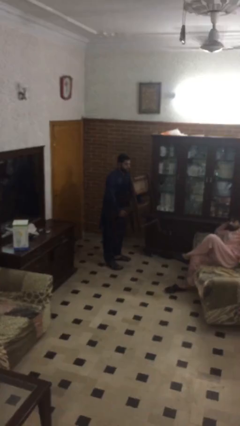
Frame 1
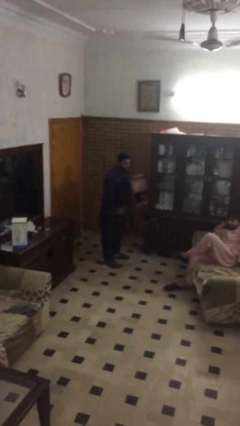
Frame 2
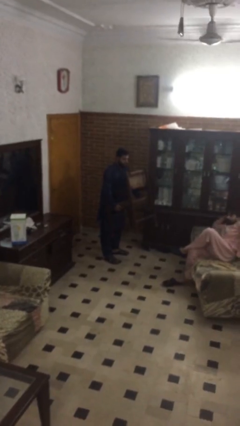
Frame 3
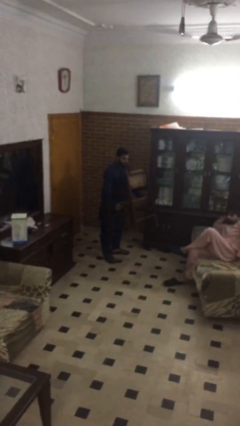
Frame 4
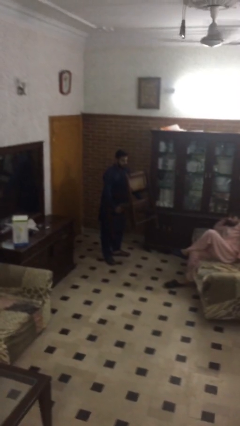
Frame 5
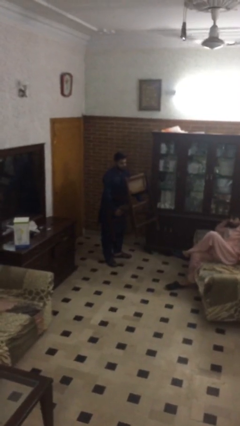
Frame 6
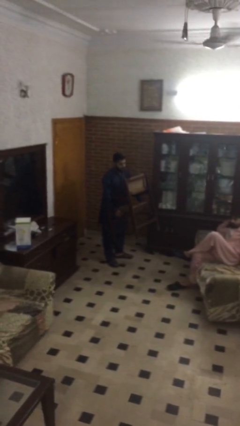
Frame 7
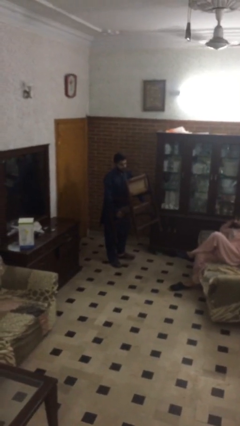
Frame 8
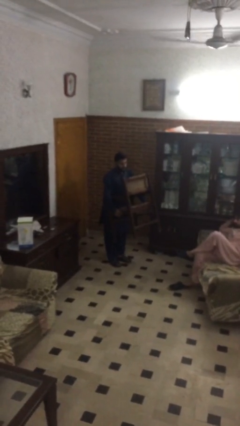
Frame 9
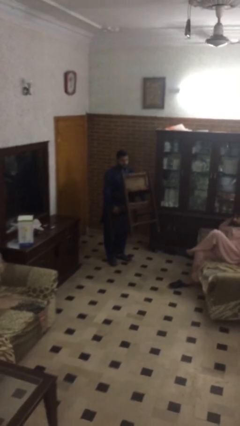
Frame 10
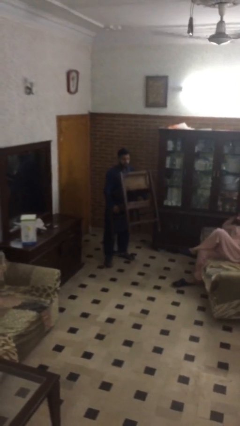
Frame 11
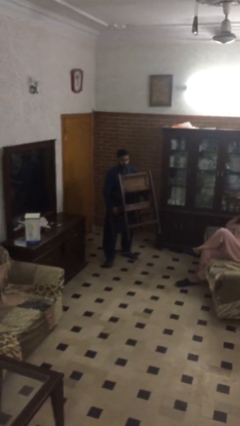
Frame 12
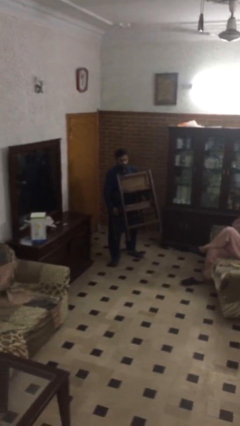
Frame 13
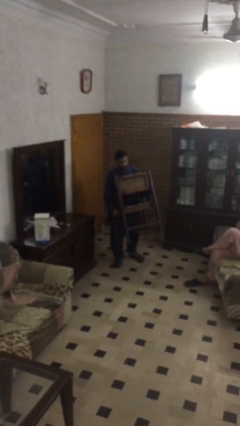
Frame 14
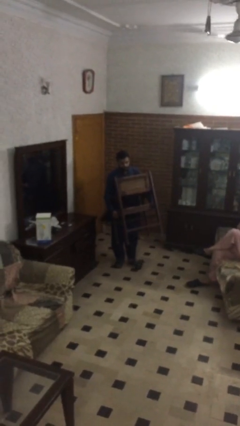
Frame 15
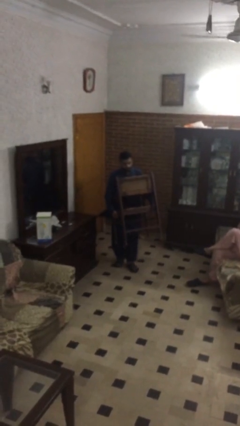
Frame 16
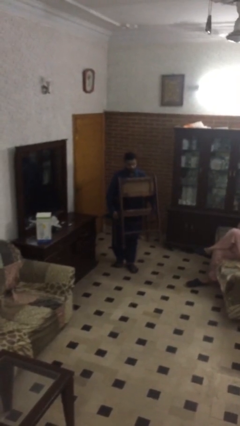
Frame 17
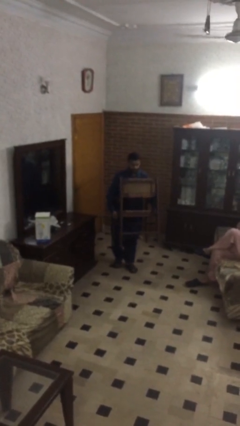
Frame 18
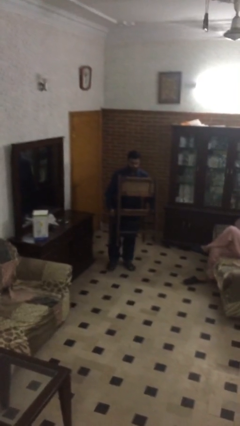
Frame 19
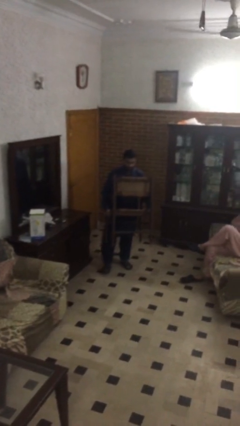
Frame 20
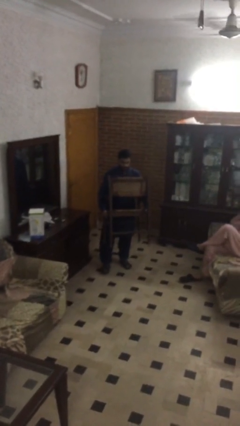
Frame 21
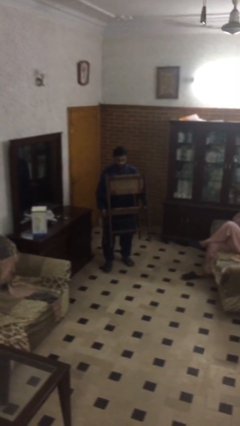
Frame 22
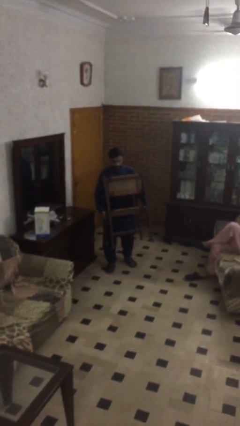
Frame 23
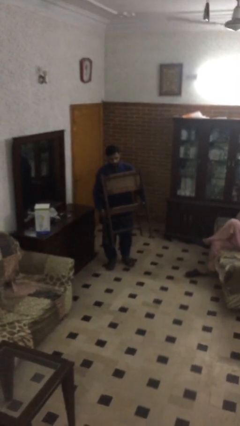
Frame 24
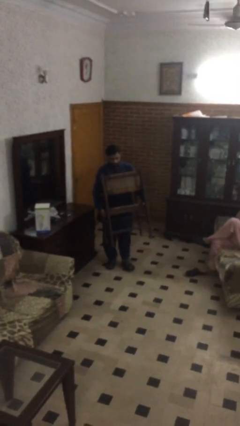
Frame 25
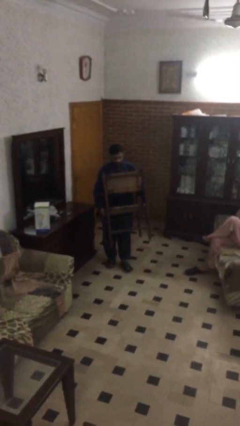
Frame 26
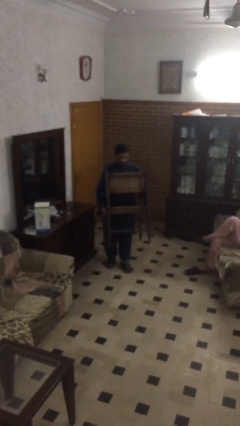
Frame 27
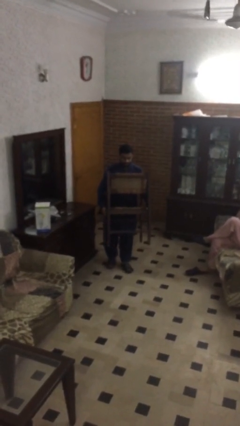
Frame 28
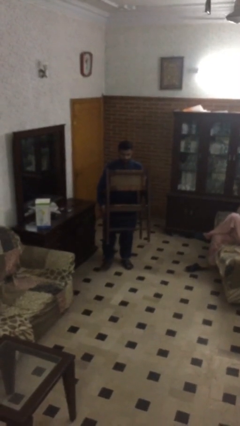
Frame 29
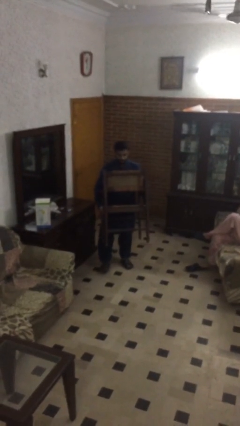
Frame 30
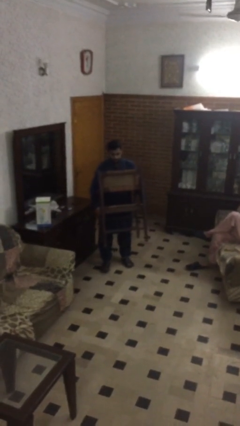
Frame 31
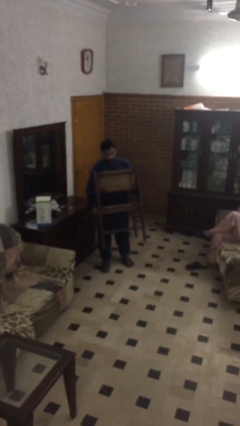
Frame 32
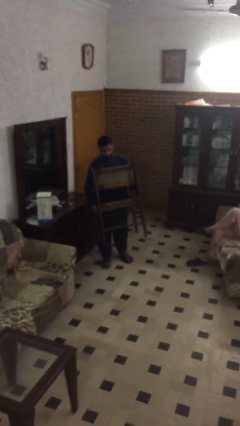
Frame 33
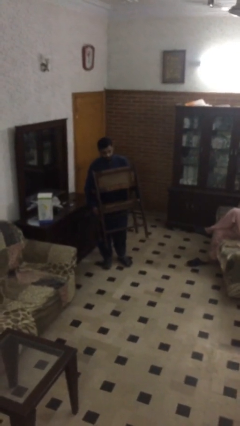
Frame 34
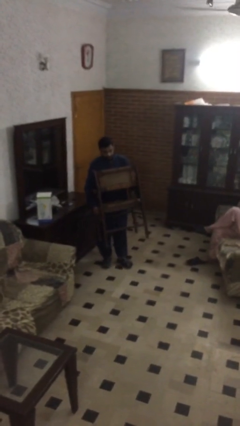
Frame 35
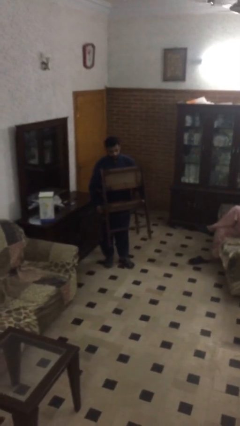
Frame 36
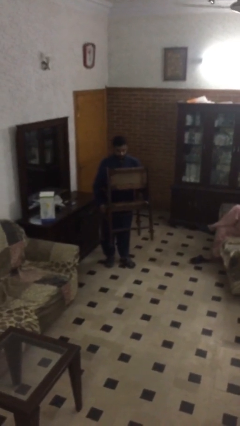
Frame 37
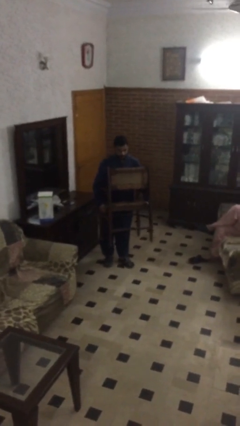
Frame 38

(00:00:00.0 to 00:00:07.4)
person carries heavy object

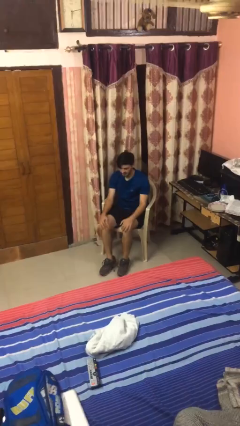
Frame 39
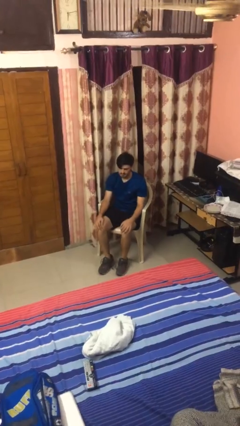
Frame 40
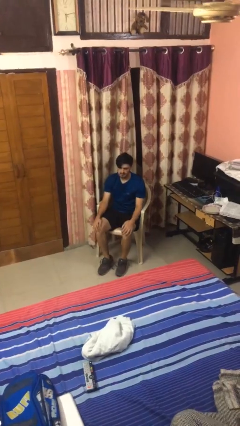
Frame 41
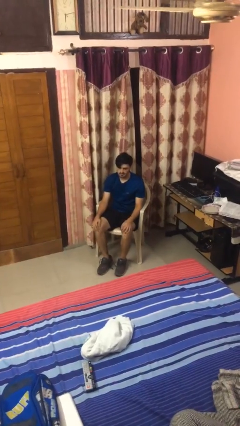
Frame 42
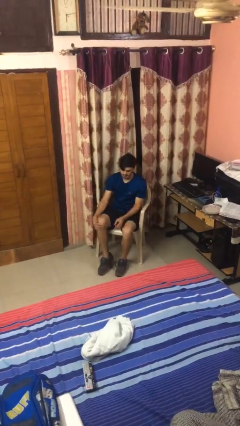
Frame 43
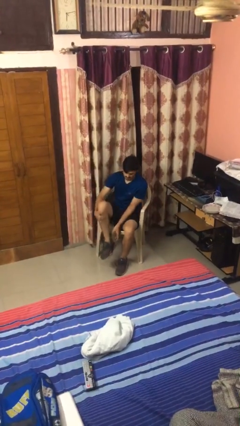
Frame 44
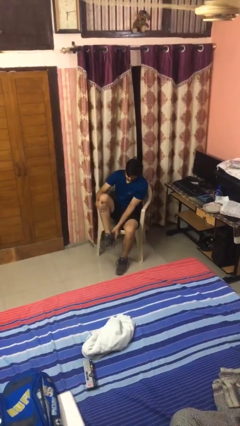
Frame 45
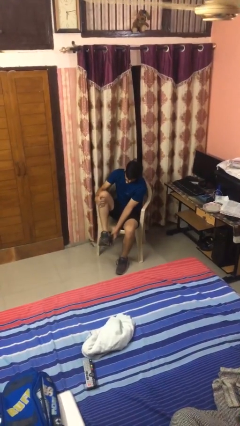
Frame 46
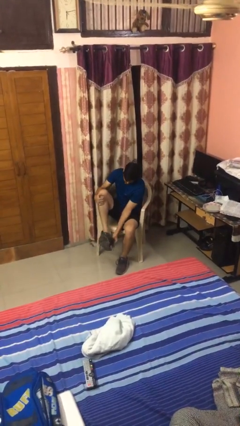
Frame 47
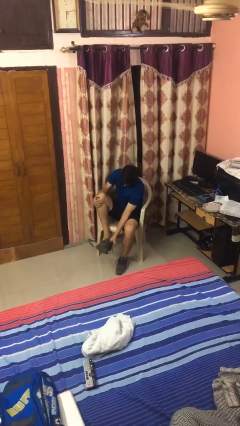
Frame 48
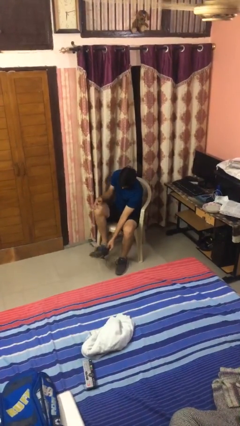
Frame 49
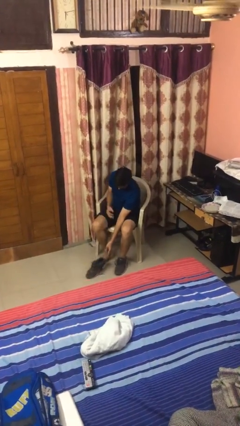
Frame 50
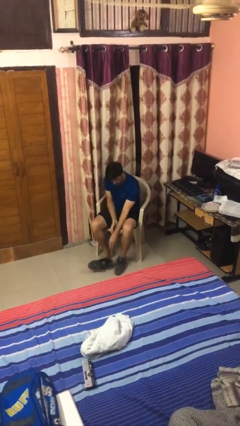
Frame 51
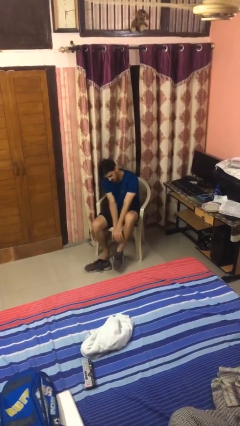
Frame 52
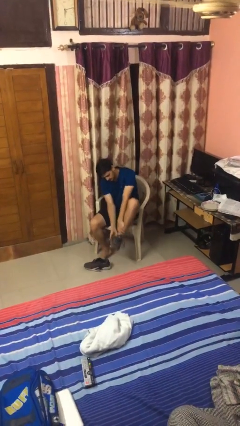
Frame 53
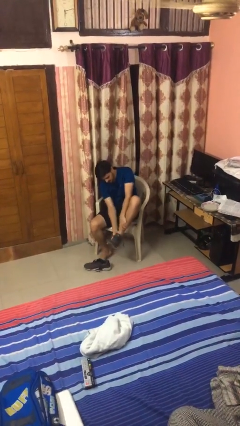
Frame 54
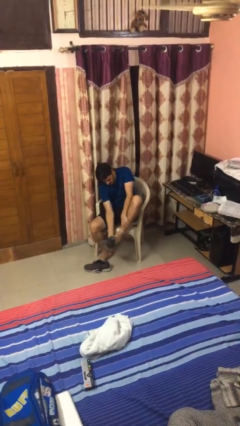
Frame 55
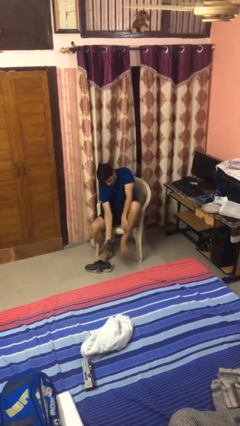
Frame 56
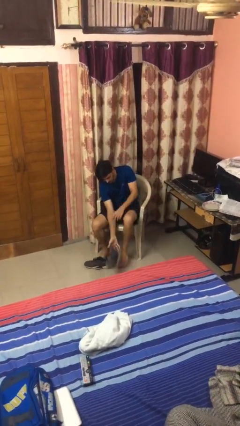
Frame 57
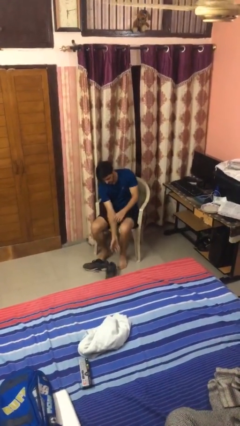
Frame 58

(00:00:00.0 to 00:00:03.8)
person takes off boots

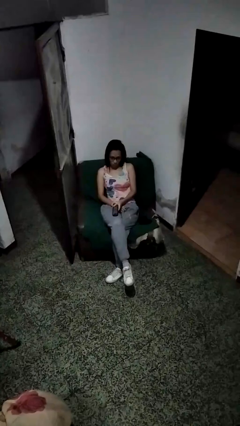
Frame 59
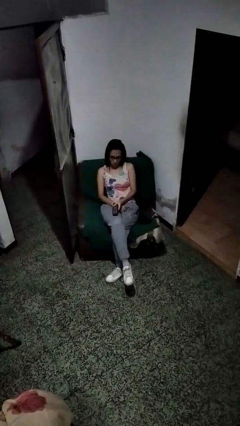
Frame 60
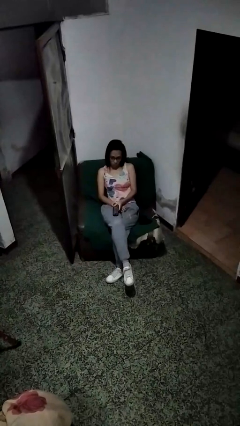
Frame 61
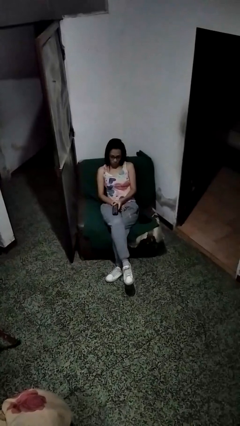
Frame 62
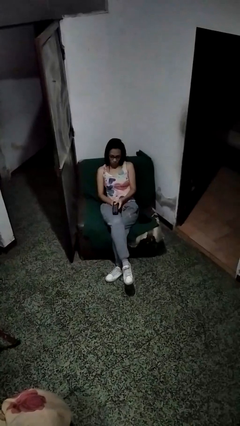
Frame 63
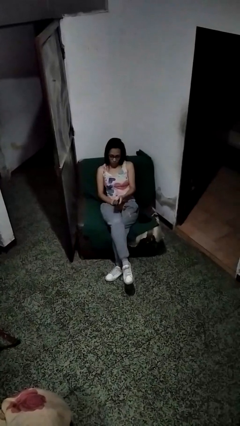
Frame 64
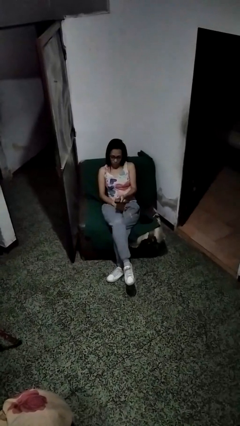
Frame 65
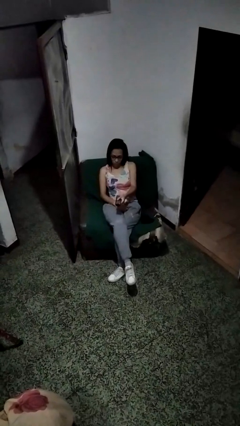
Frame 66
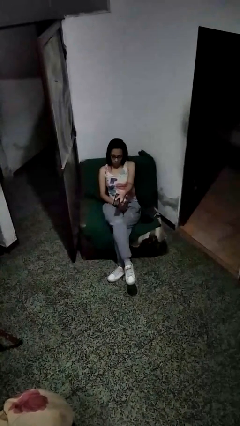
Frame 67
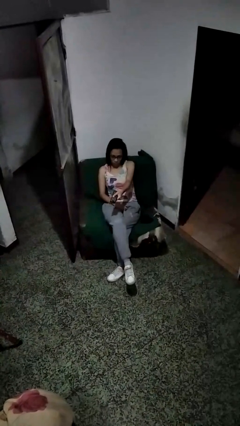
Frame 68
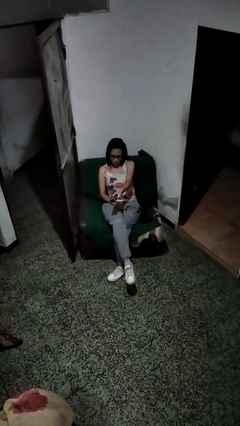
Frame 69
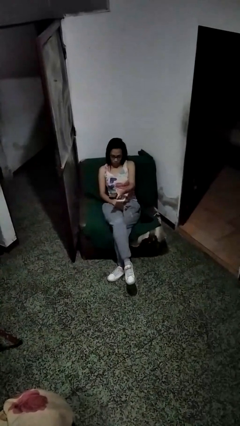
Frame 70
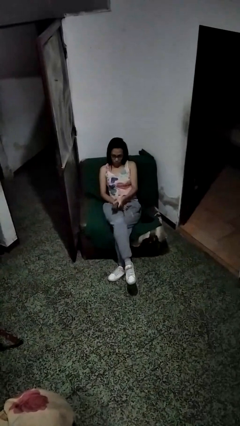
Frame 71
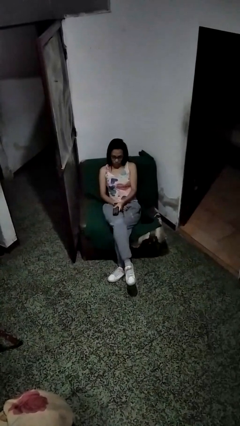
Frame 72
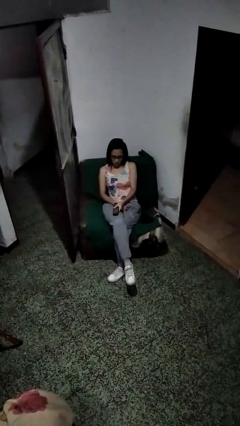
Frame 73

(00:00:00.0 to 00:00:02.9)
person uses television remote

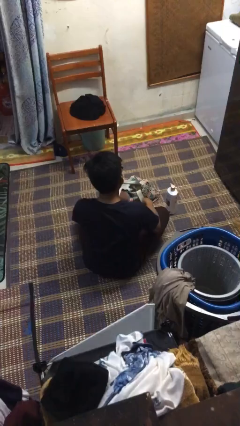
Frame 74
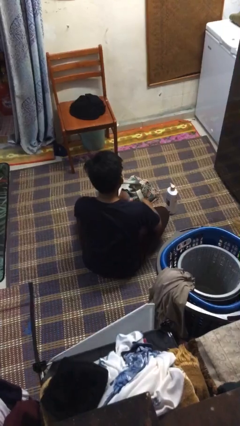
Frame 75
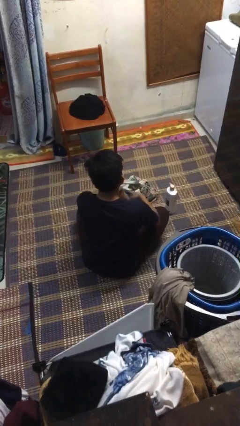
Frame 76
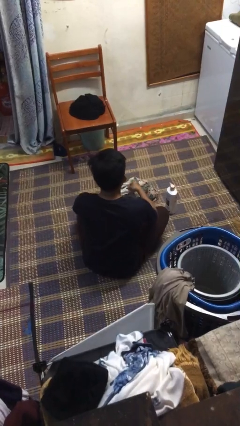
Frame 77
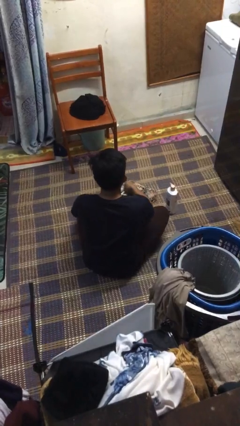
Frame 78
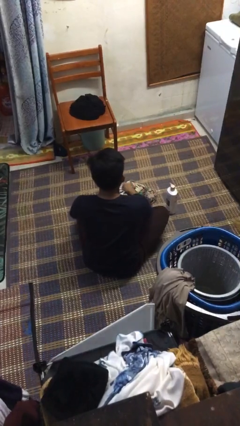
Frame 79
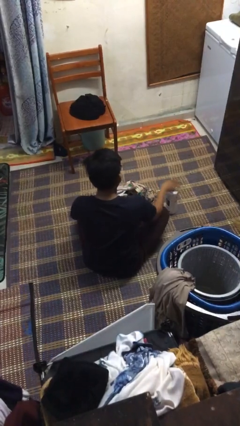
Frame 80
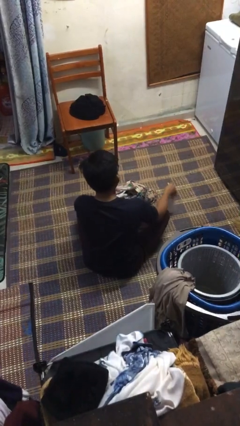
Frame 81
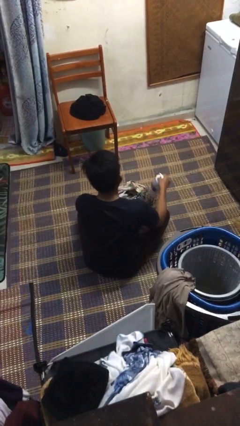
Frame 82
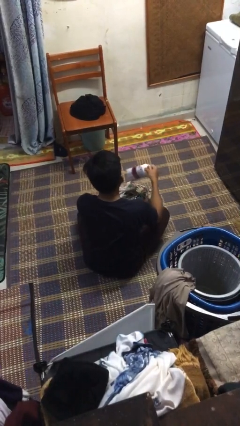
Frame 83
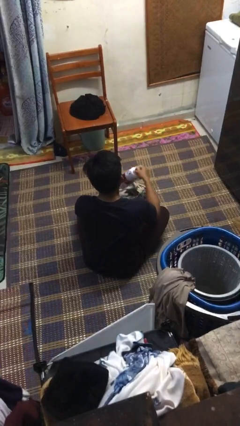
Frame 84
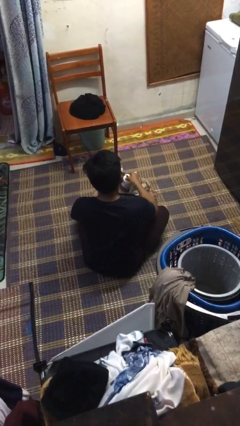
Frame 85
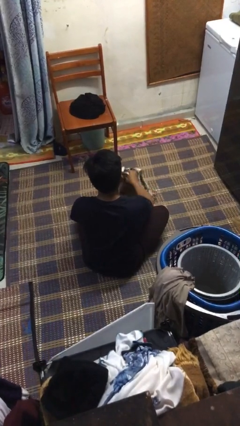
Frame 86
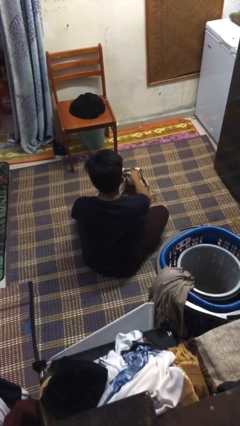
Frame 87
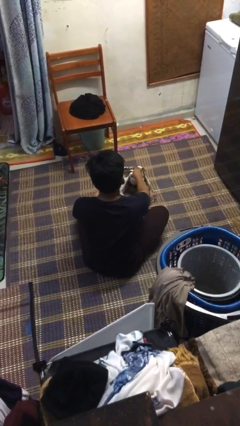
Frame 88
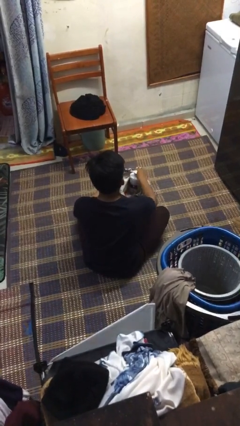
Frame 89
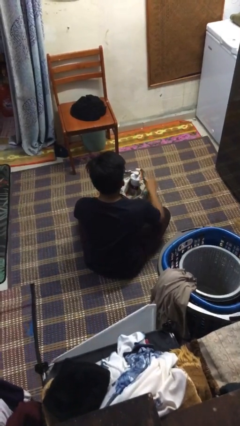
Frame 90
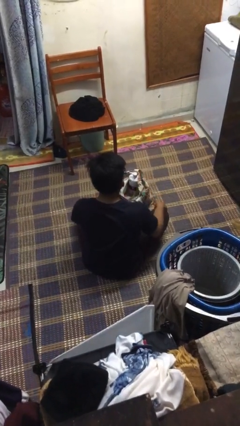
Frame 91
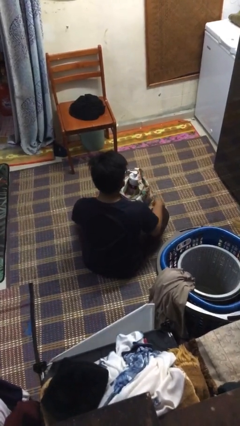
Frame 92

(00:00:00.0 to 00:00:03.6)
person puts object into bag

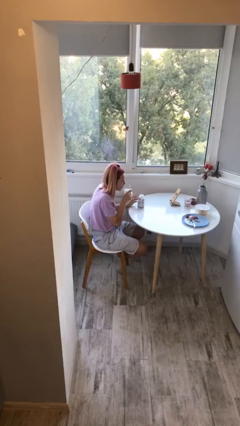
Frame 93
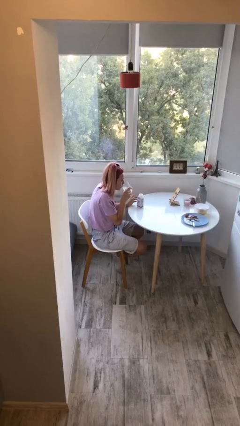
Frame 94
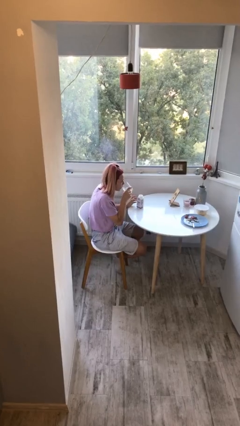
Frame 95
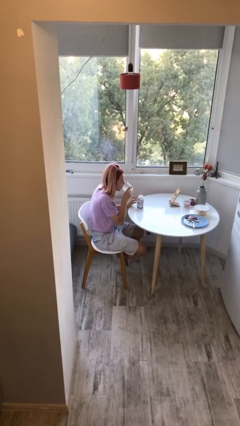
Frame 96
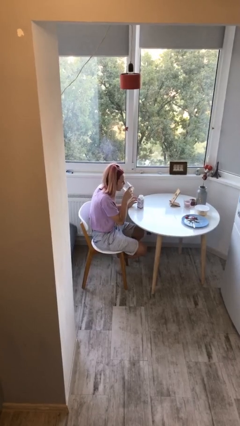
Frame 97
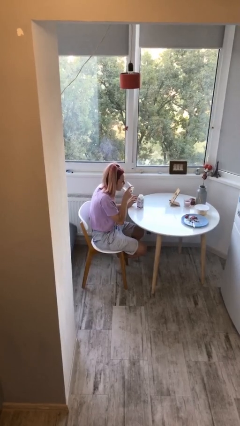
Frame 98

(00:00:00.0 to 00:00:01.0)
person drinks from cup
